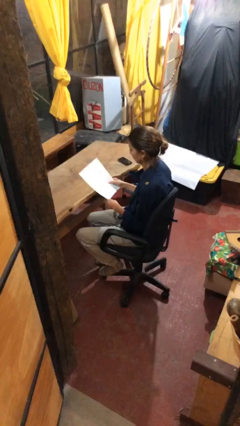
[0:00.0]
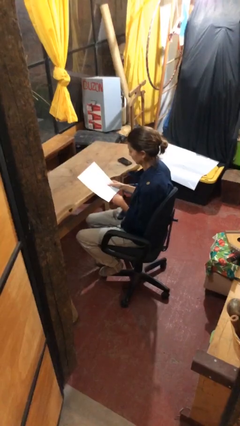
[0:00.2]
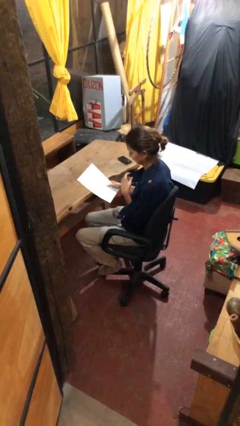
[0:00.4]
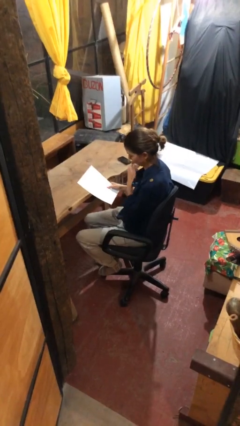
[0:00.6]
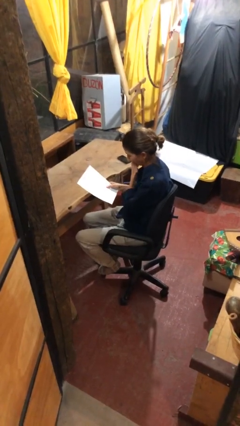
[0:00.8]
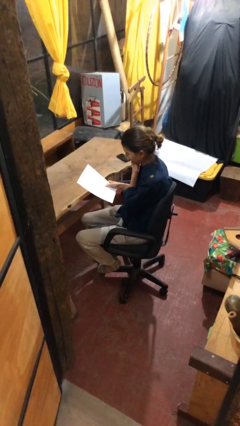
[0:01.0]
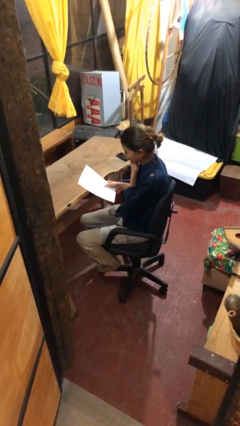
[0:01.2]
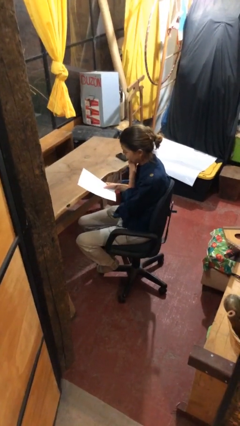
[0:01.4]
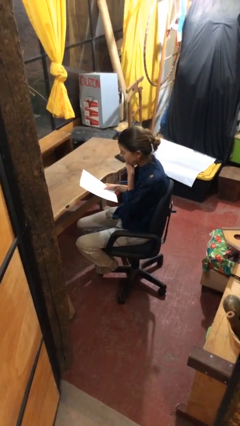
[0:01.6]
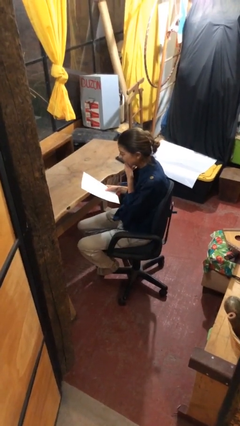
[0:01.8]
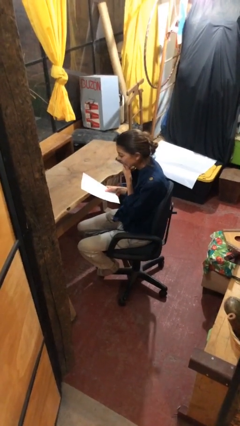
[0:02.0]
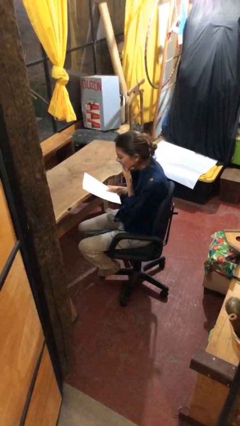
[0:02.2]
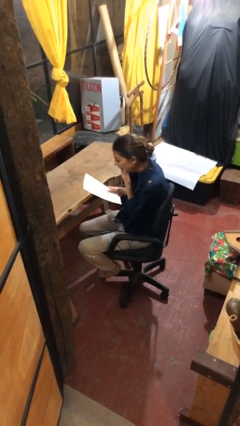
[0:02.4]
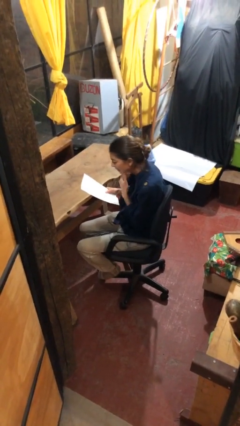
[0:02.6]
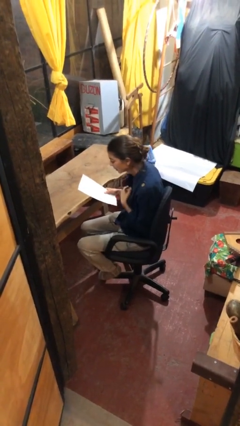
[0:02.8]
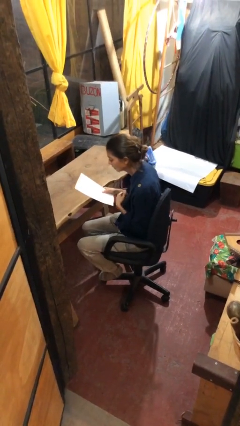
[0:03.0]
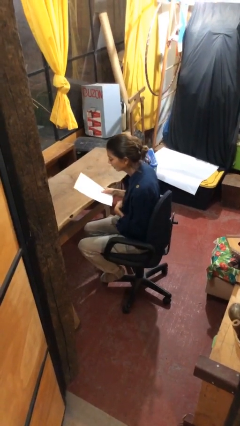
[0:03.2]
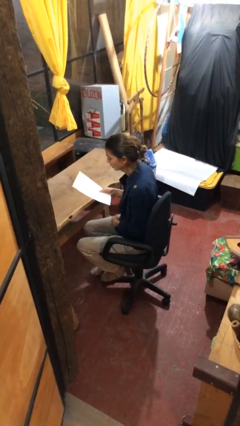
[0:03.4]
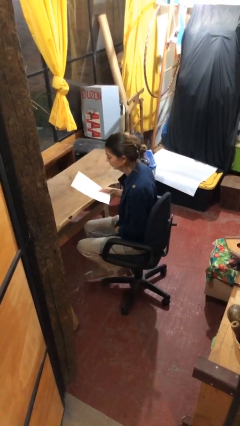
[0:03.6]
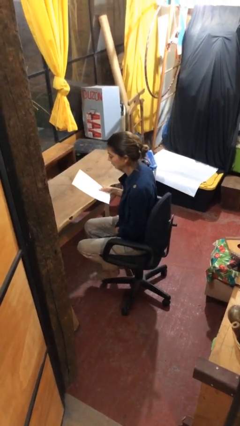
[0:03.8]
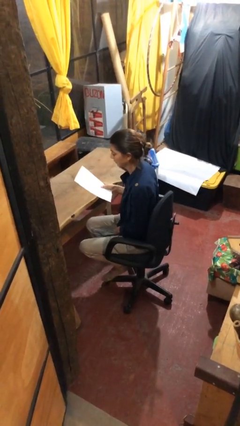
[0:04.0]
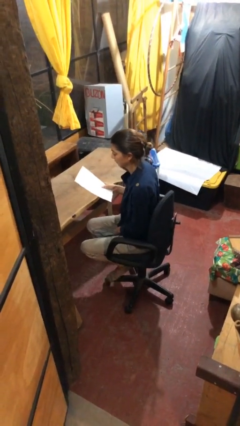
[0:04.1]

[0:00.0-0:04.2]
person reads document

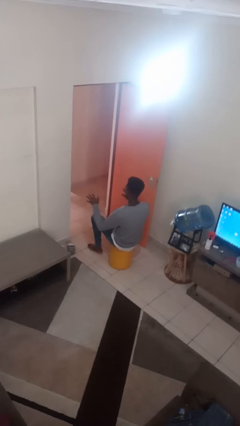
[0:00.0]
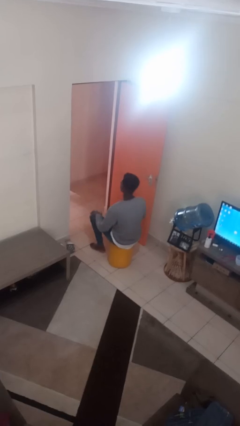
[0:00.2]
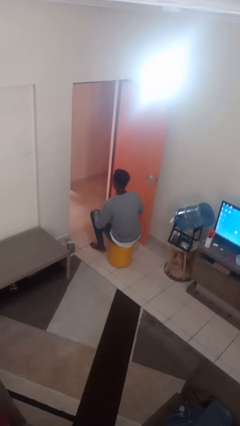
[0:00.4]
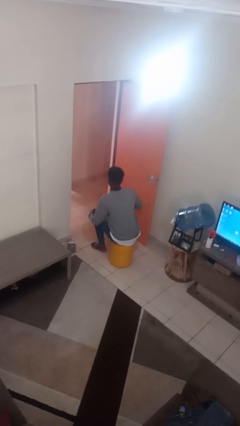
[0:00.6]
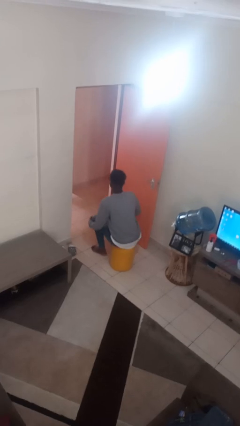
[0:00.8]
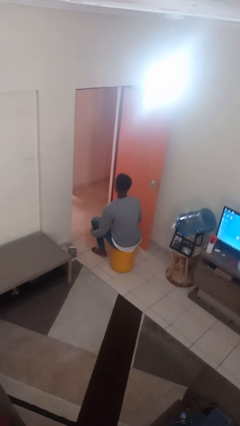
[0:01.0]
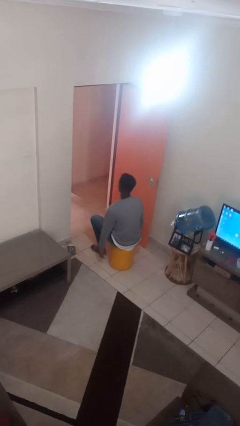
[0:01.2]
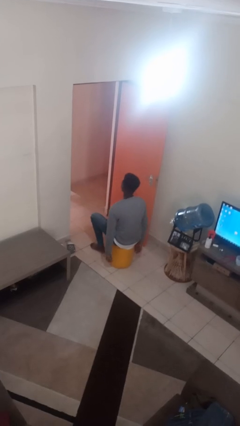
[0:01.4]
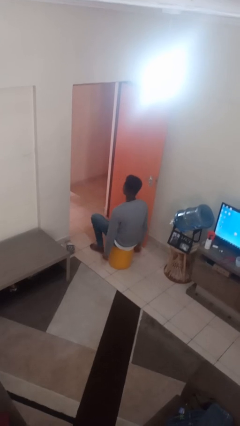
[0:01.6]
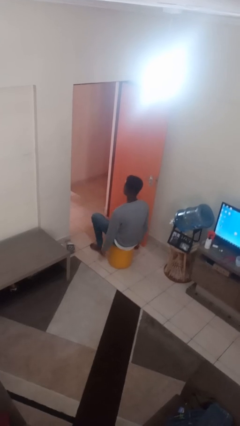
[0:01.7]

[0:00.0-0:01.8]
person slaps hands on thighs

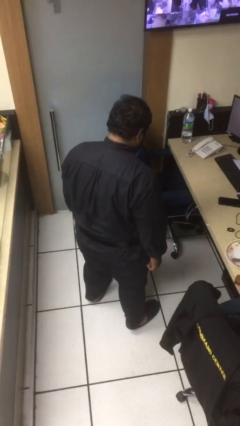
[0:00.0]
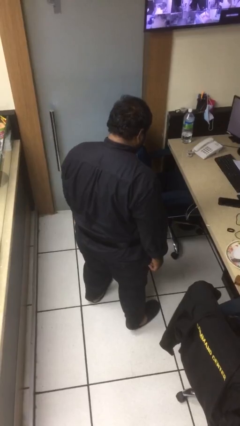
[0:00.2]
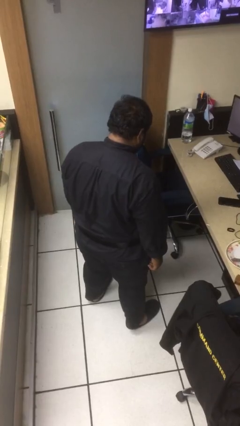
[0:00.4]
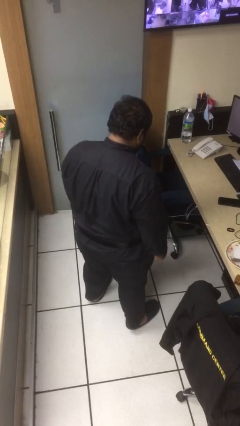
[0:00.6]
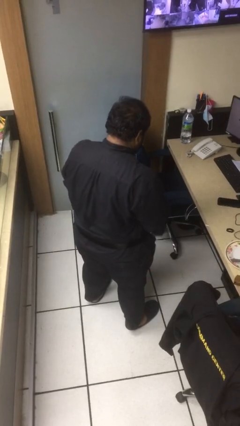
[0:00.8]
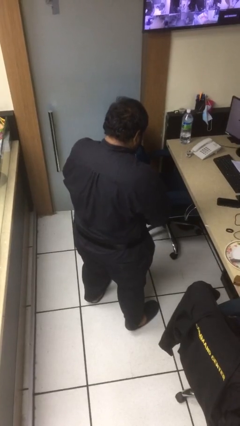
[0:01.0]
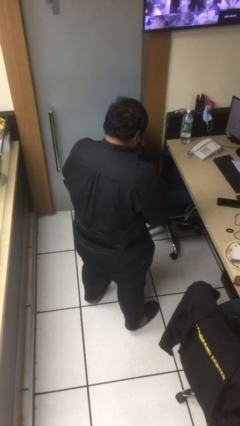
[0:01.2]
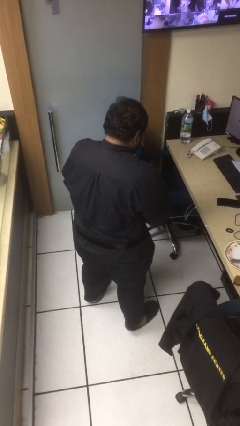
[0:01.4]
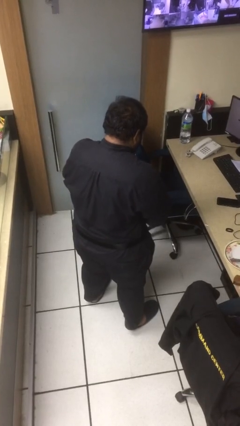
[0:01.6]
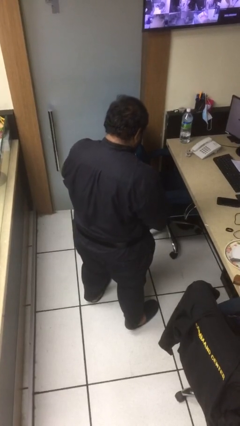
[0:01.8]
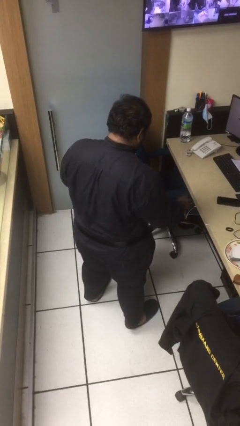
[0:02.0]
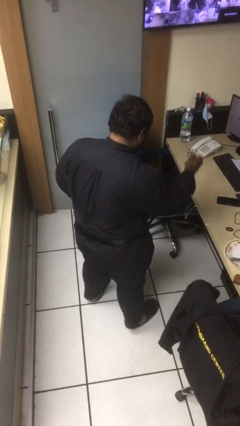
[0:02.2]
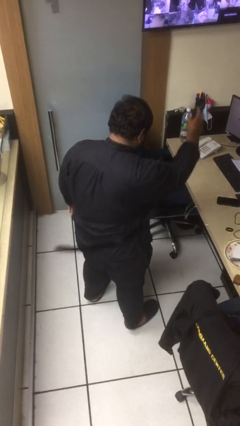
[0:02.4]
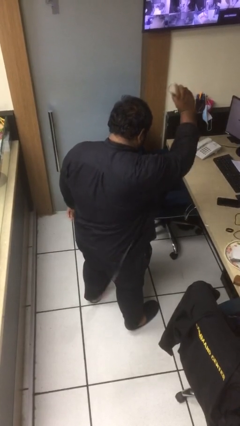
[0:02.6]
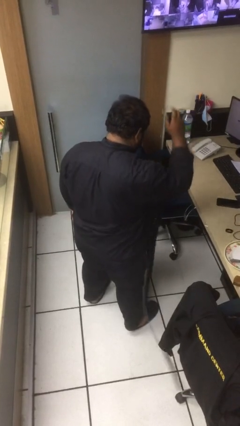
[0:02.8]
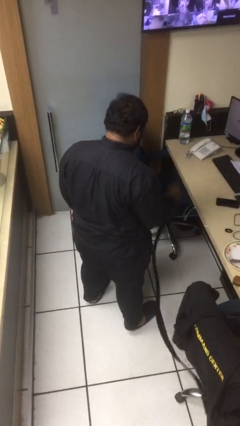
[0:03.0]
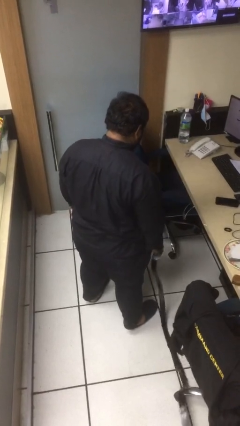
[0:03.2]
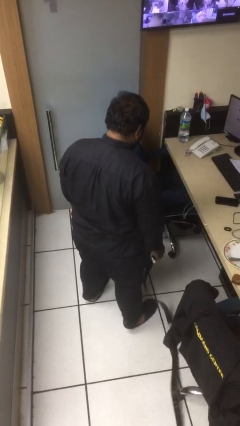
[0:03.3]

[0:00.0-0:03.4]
person takes off belt

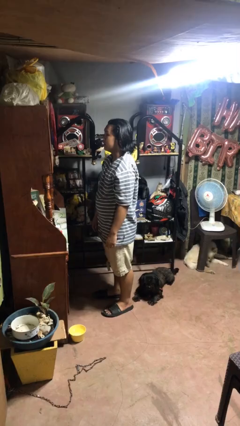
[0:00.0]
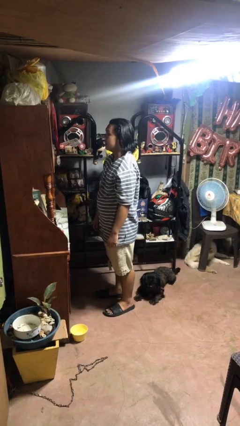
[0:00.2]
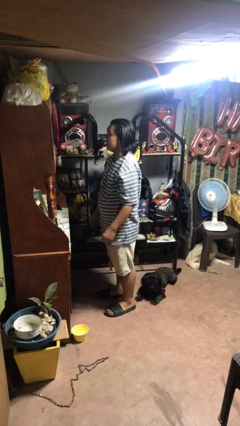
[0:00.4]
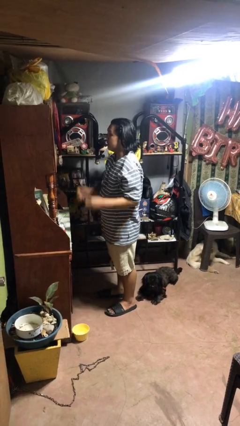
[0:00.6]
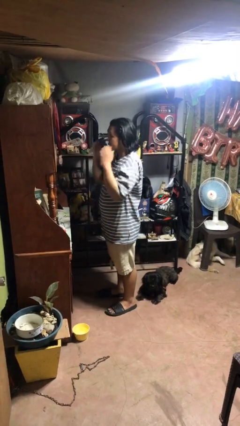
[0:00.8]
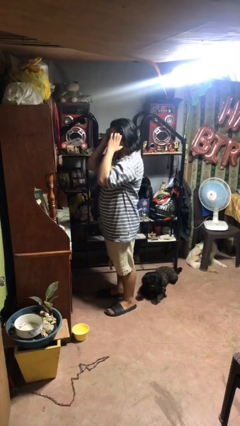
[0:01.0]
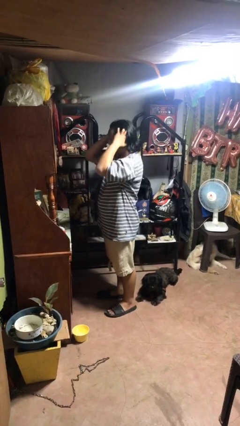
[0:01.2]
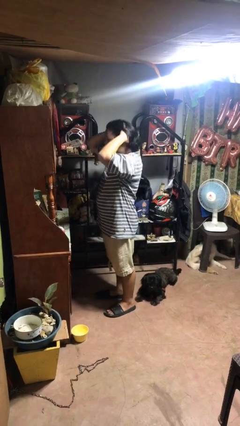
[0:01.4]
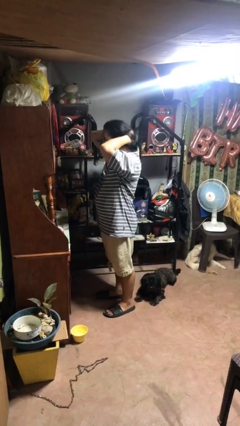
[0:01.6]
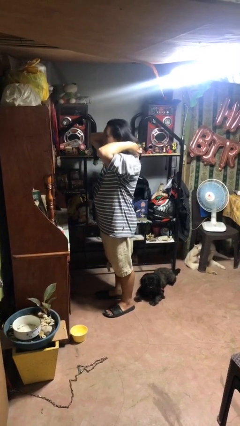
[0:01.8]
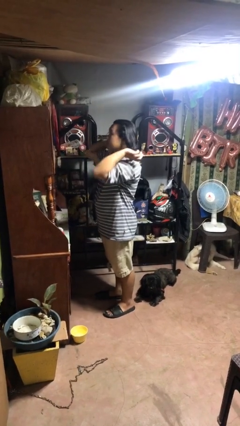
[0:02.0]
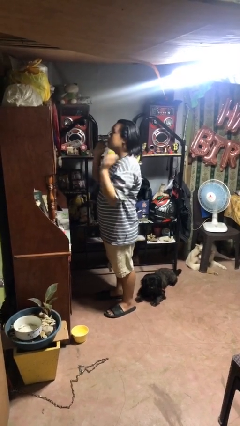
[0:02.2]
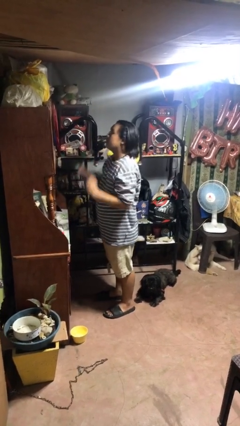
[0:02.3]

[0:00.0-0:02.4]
person strokes hair

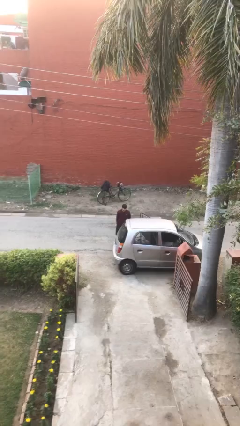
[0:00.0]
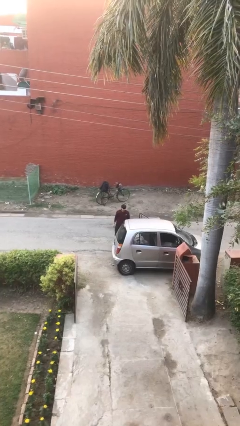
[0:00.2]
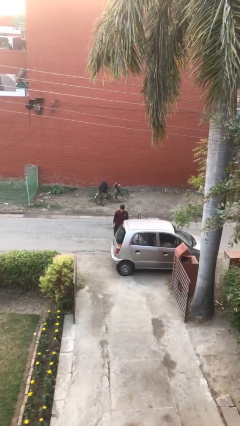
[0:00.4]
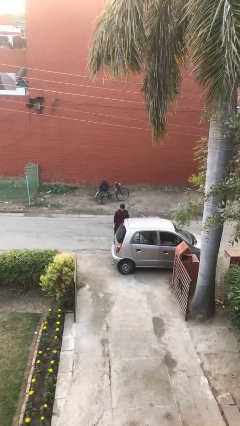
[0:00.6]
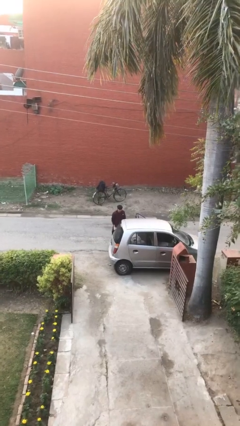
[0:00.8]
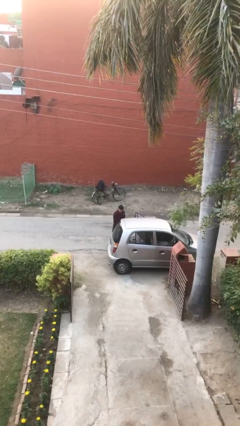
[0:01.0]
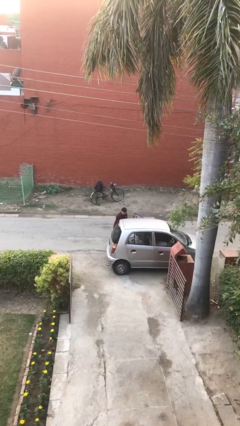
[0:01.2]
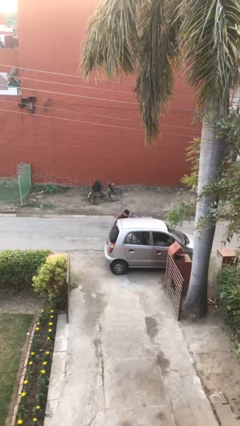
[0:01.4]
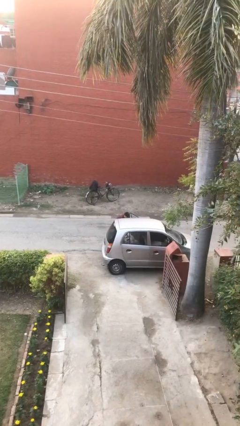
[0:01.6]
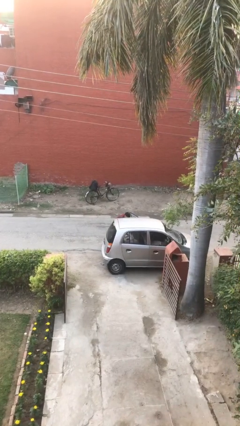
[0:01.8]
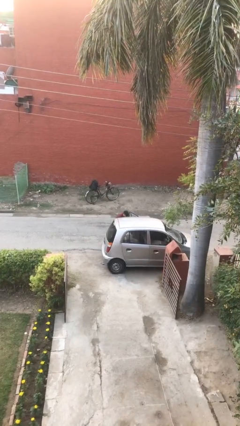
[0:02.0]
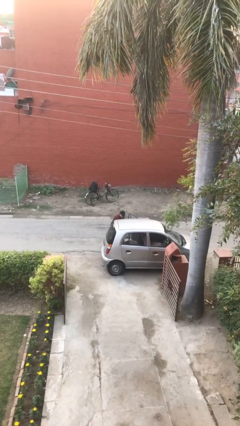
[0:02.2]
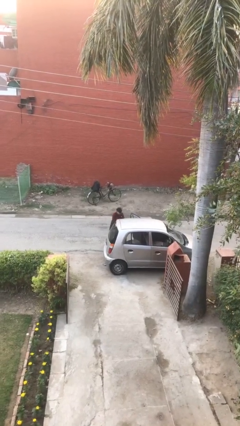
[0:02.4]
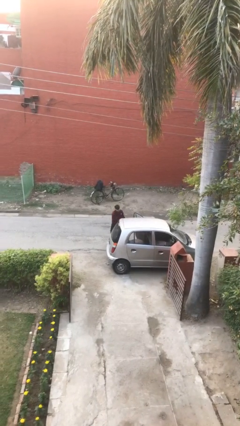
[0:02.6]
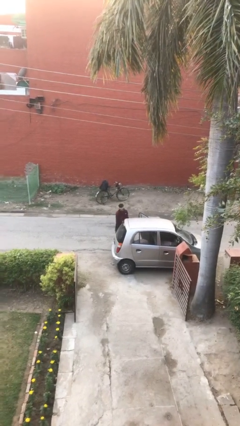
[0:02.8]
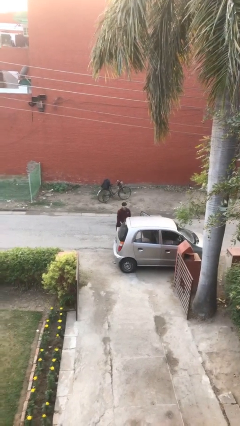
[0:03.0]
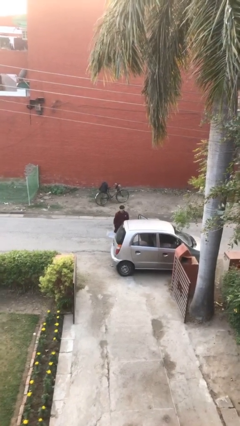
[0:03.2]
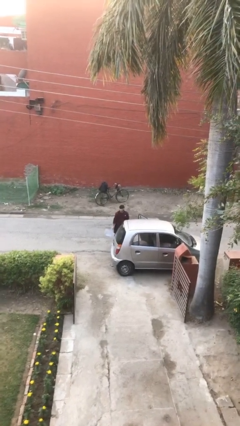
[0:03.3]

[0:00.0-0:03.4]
person unloads car

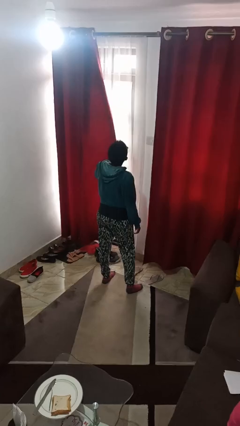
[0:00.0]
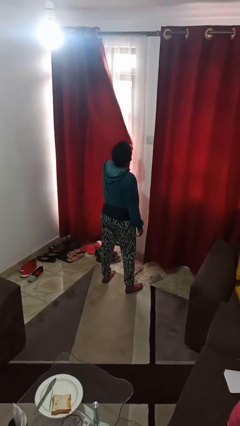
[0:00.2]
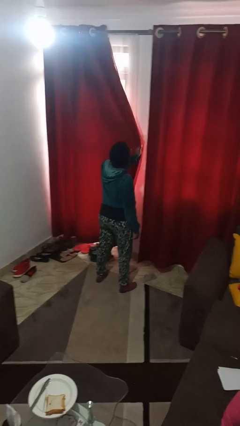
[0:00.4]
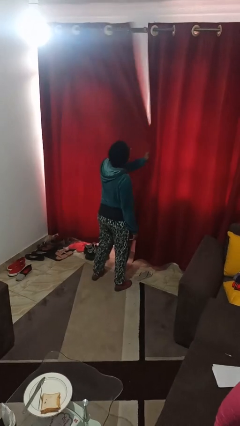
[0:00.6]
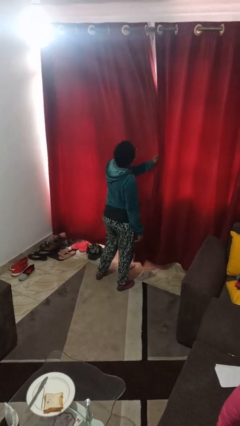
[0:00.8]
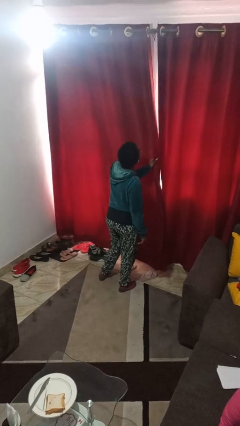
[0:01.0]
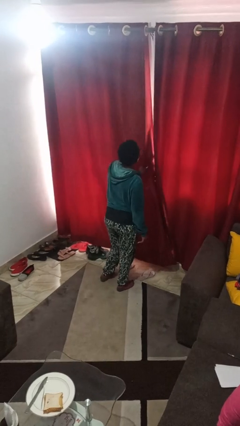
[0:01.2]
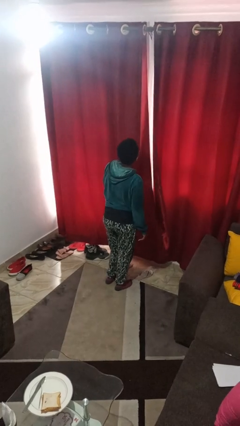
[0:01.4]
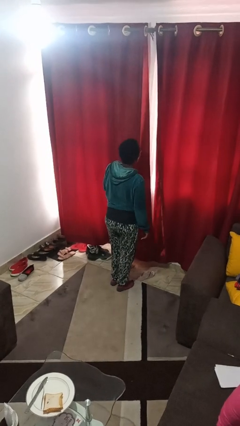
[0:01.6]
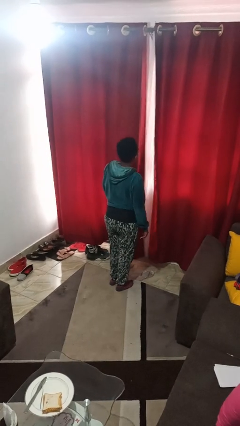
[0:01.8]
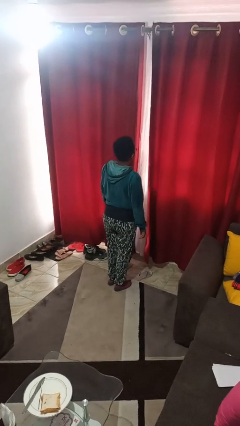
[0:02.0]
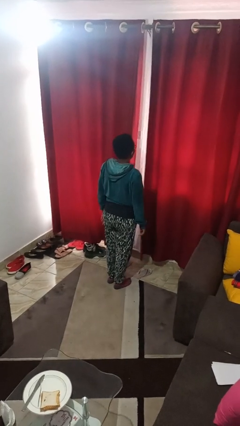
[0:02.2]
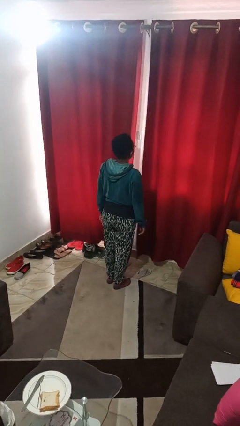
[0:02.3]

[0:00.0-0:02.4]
person closes curtains

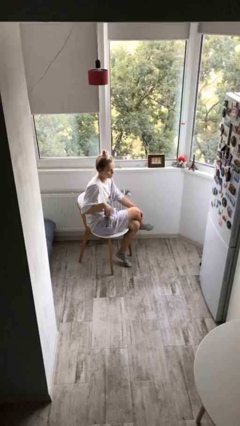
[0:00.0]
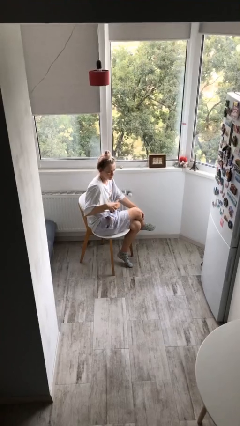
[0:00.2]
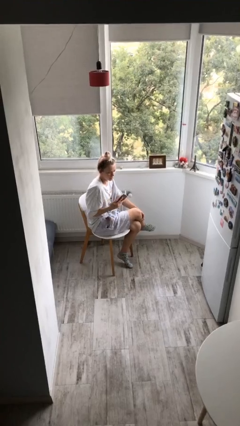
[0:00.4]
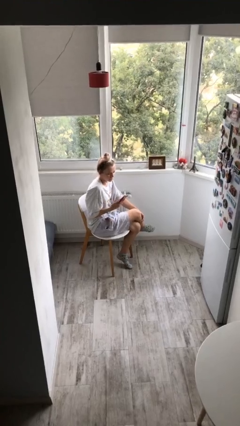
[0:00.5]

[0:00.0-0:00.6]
person takes phone from pocket
